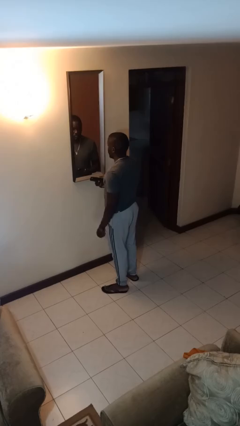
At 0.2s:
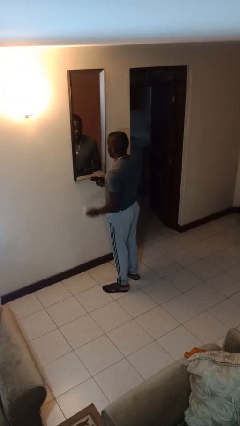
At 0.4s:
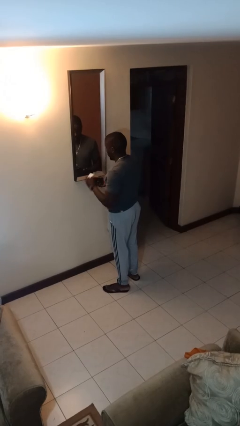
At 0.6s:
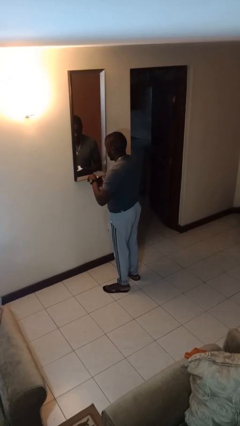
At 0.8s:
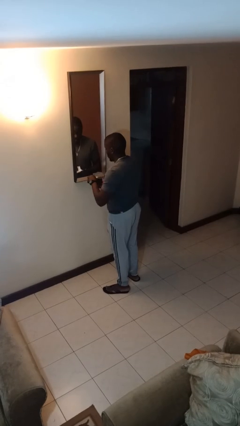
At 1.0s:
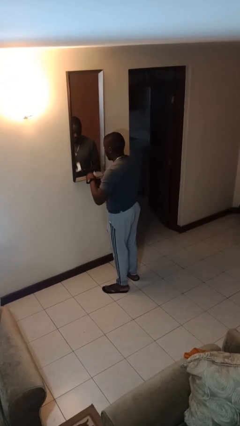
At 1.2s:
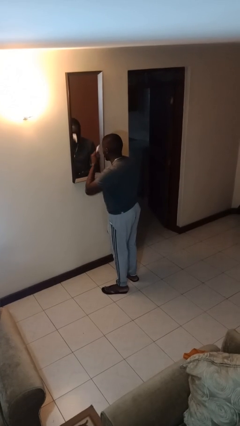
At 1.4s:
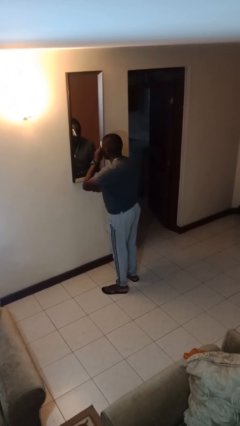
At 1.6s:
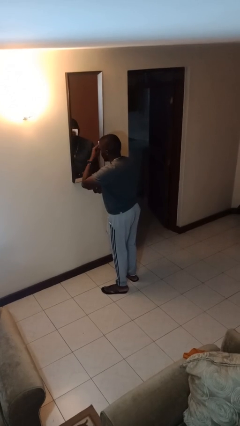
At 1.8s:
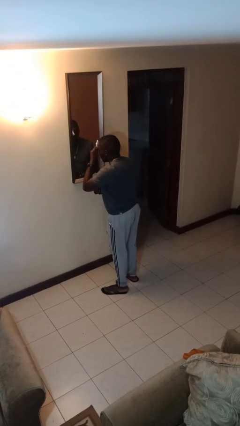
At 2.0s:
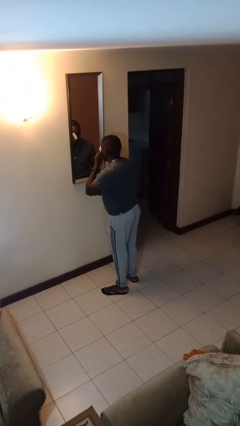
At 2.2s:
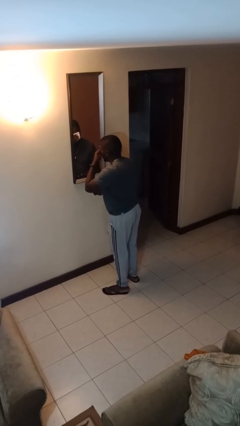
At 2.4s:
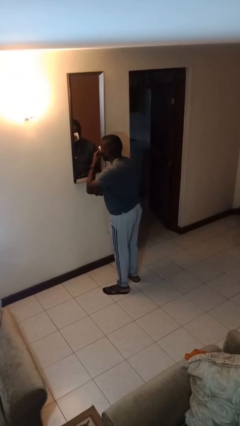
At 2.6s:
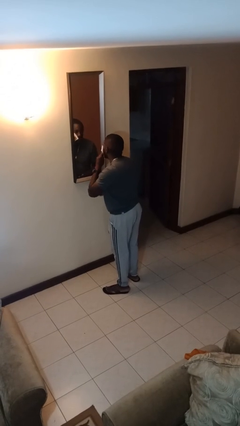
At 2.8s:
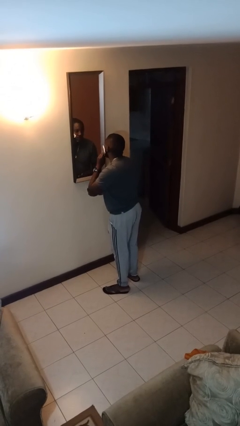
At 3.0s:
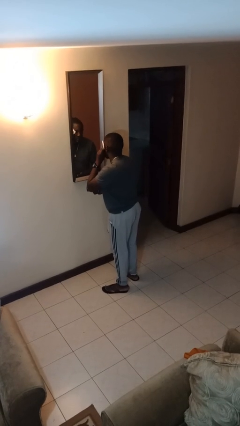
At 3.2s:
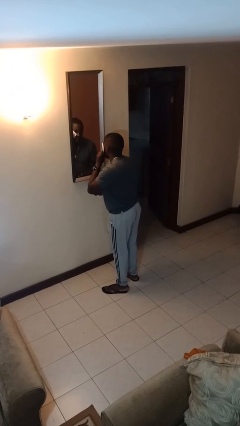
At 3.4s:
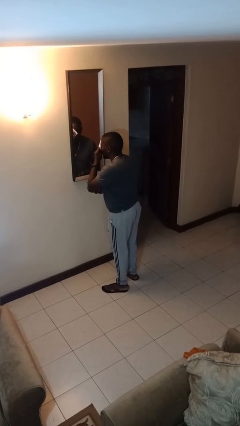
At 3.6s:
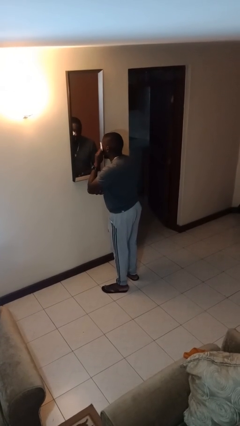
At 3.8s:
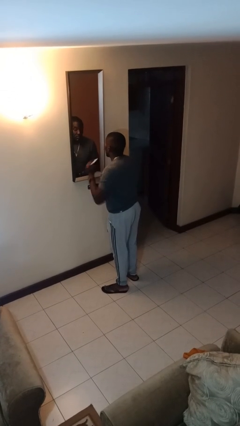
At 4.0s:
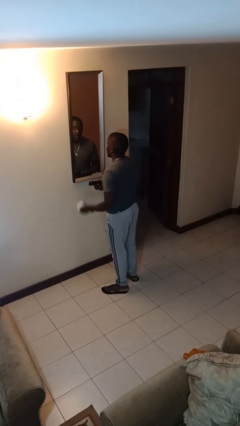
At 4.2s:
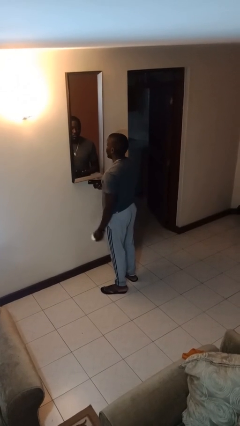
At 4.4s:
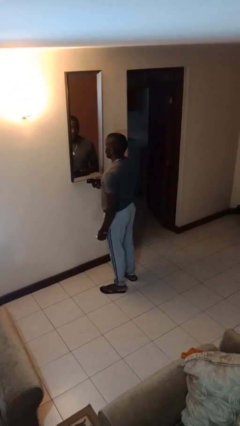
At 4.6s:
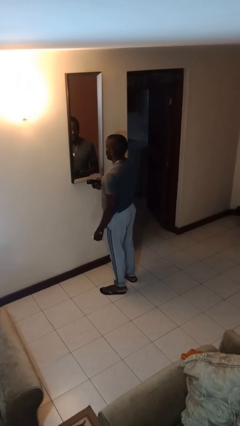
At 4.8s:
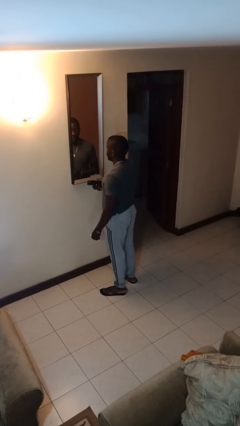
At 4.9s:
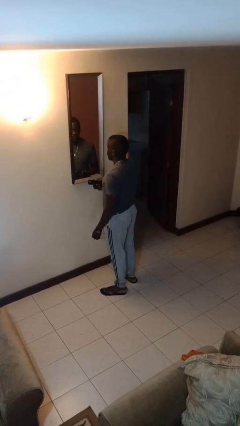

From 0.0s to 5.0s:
person applies foundation makeup

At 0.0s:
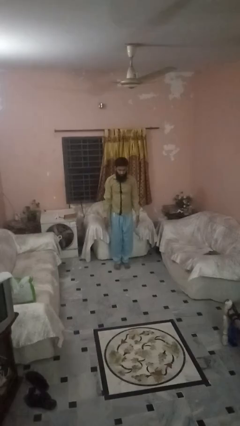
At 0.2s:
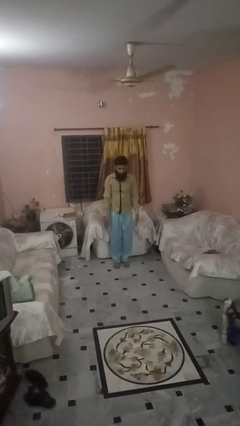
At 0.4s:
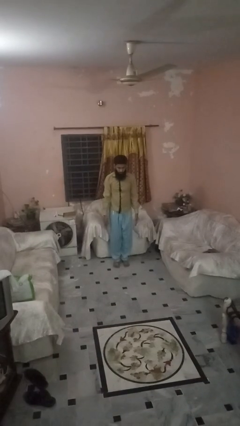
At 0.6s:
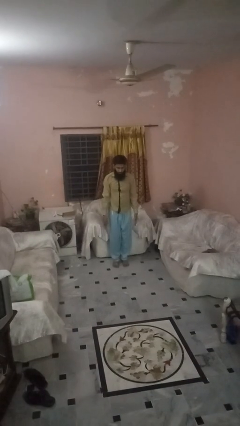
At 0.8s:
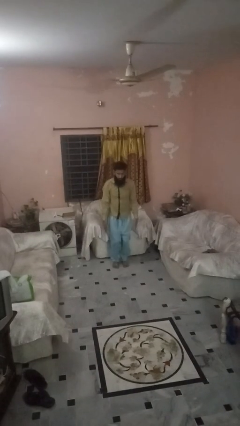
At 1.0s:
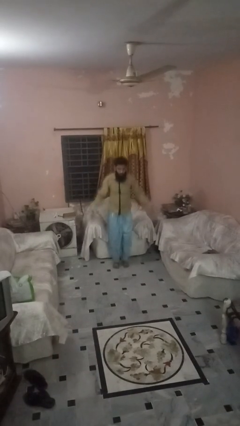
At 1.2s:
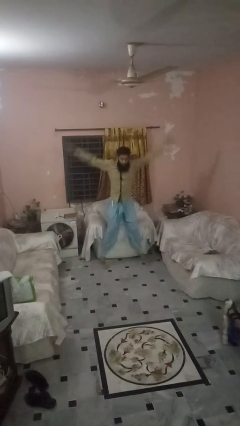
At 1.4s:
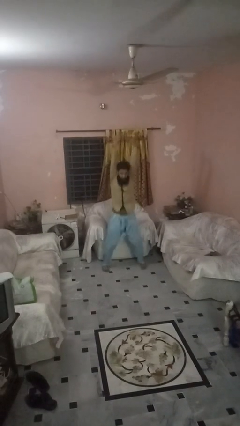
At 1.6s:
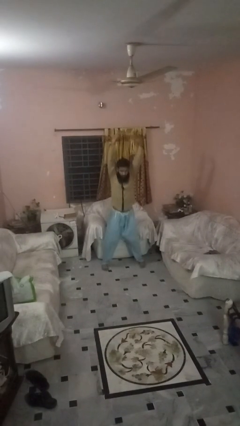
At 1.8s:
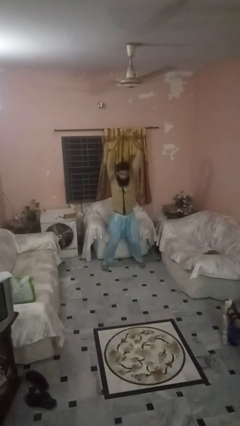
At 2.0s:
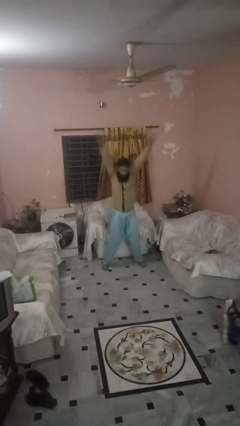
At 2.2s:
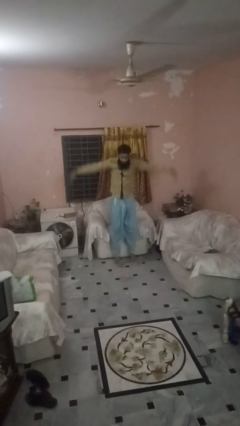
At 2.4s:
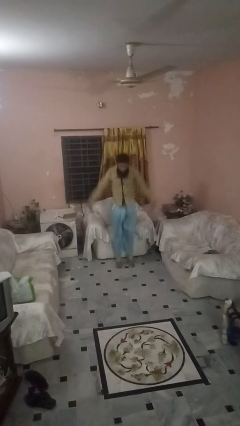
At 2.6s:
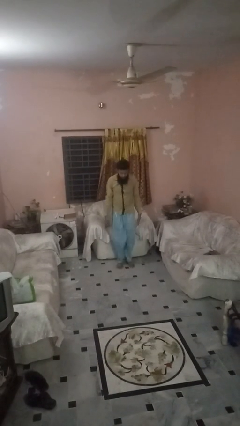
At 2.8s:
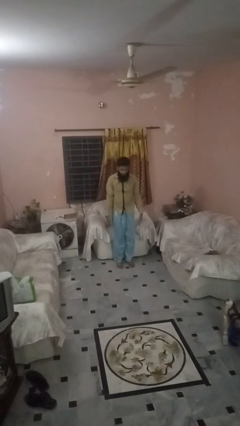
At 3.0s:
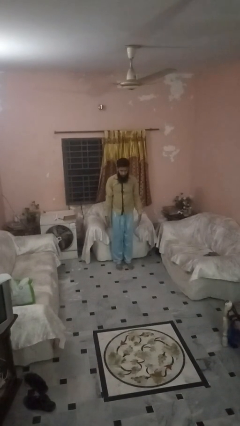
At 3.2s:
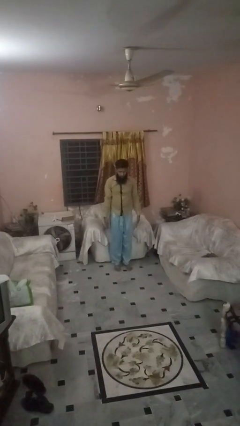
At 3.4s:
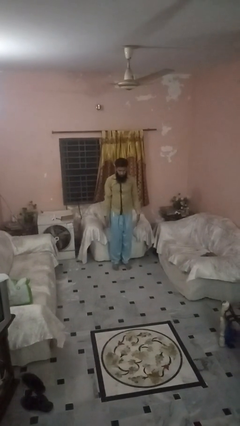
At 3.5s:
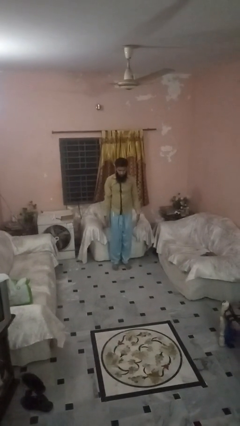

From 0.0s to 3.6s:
person exercises with jumping jacks

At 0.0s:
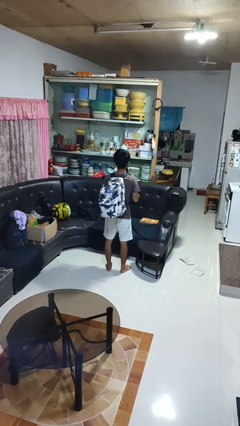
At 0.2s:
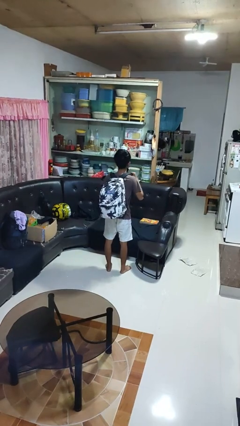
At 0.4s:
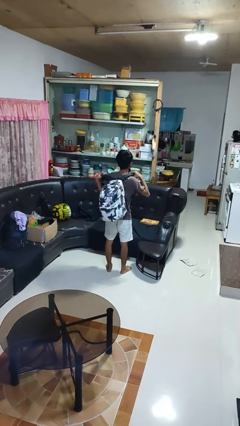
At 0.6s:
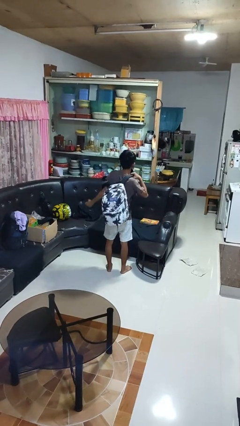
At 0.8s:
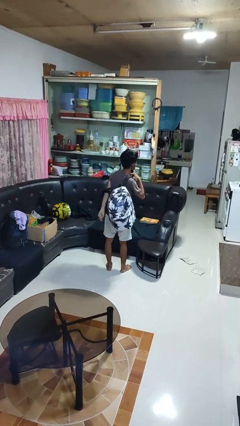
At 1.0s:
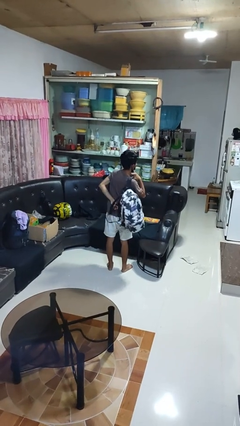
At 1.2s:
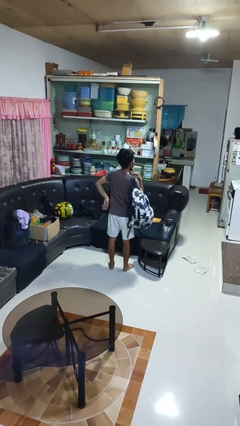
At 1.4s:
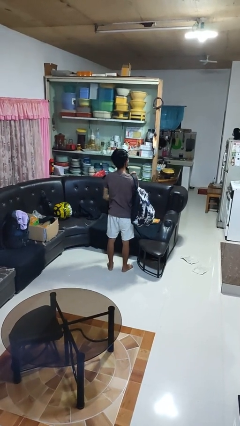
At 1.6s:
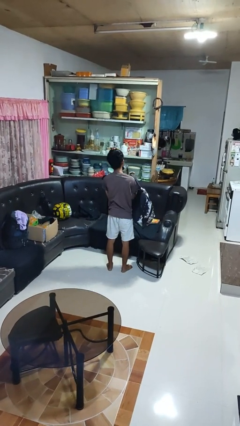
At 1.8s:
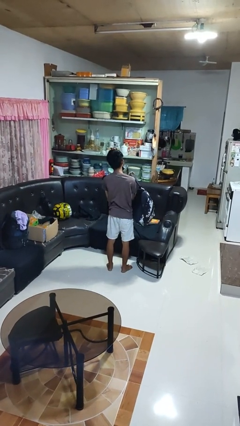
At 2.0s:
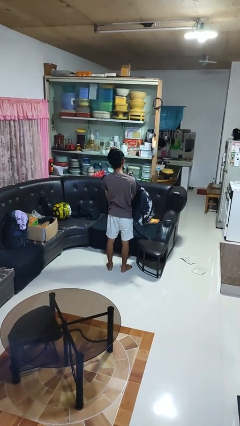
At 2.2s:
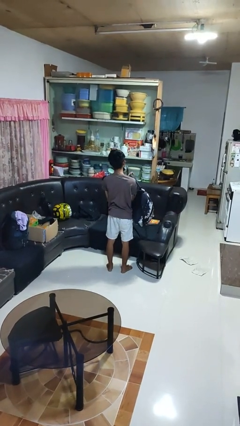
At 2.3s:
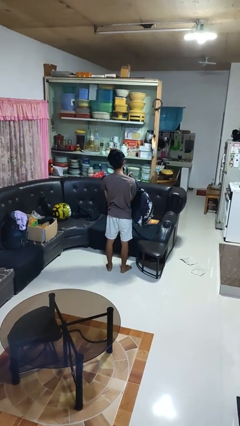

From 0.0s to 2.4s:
person takes off backpack

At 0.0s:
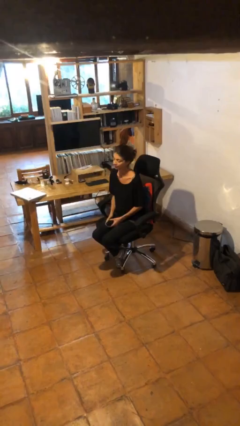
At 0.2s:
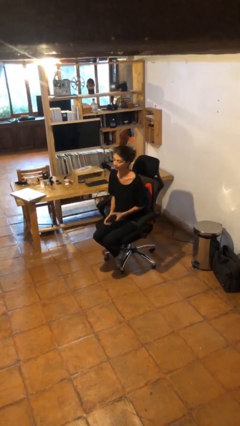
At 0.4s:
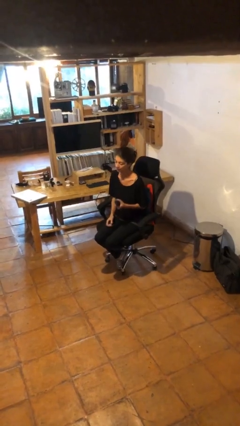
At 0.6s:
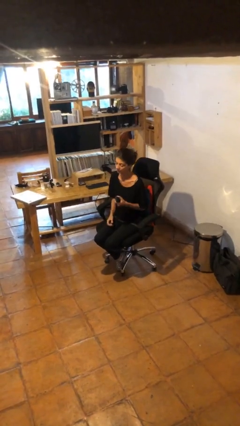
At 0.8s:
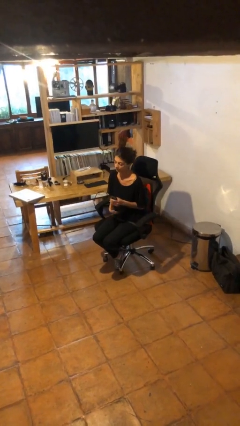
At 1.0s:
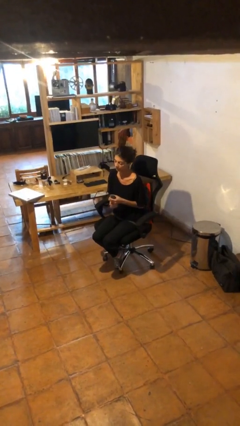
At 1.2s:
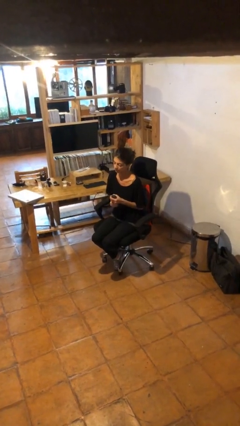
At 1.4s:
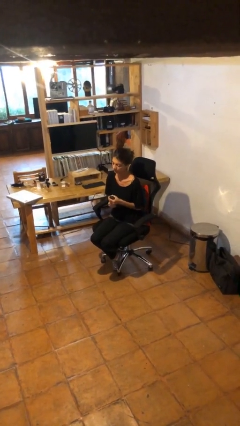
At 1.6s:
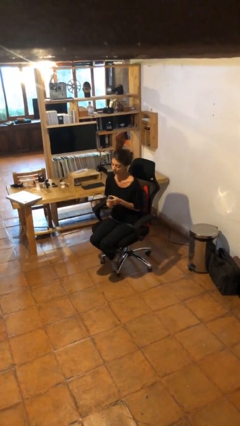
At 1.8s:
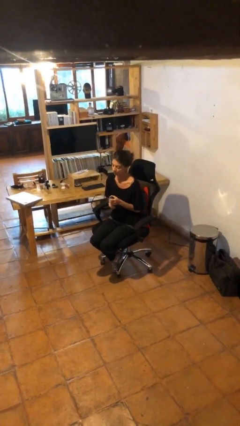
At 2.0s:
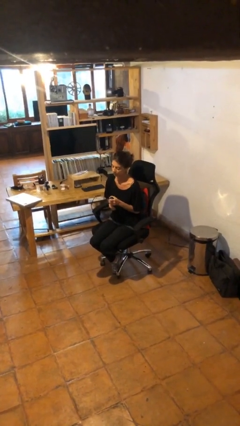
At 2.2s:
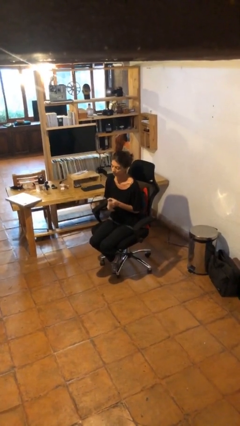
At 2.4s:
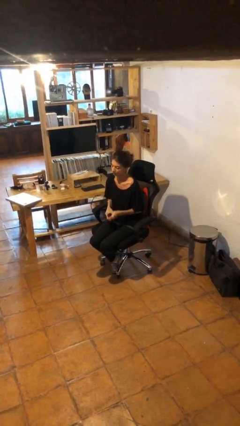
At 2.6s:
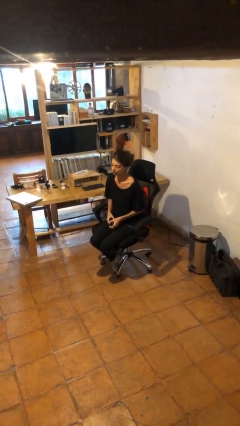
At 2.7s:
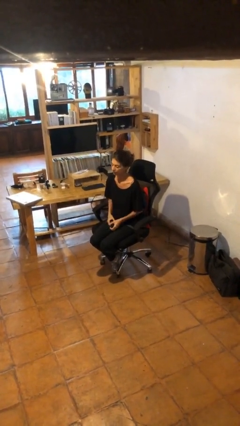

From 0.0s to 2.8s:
person squeezes object

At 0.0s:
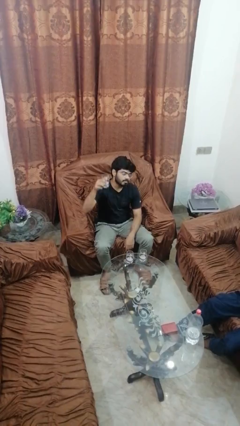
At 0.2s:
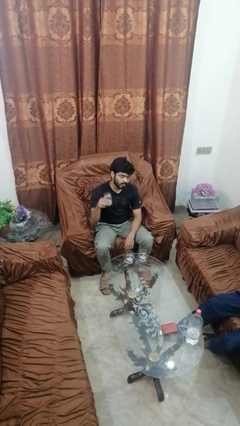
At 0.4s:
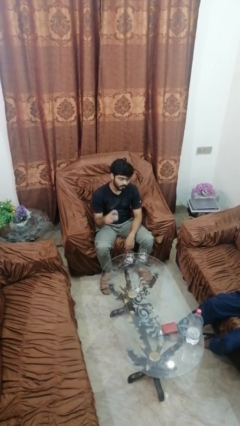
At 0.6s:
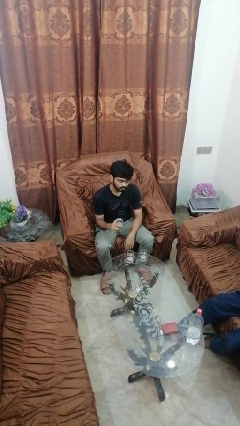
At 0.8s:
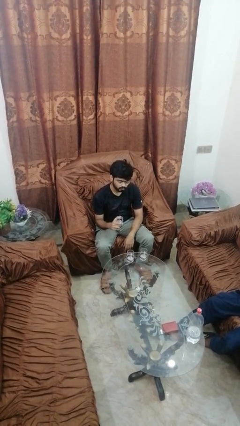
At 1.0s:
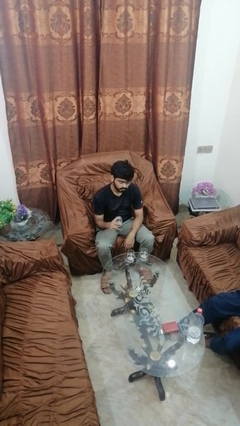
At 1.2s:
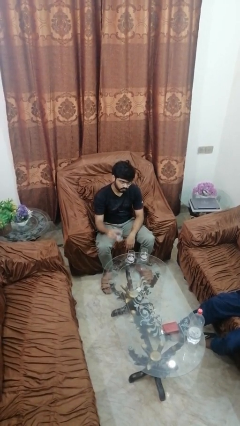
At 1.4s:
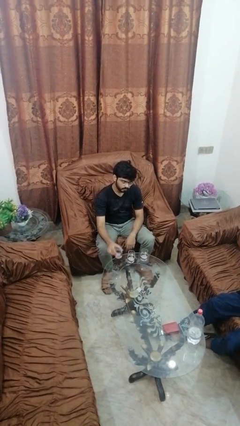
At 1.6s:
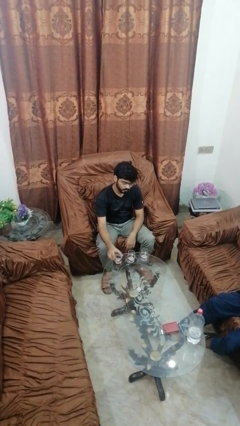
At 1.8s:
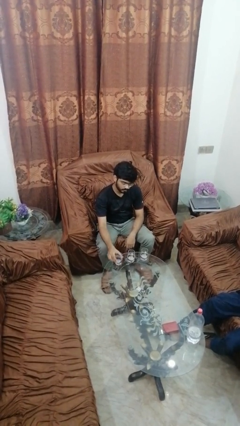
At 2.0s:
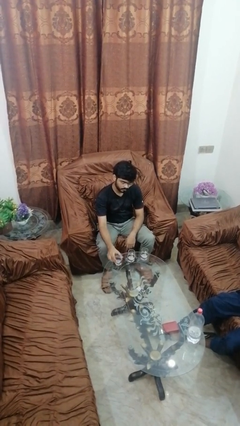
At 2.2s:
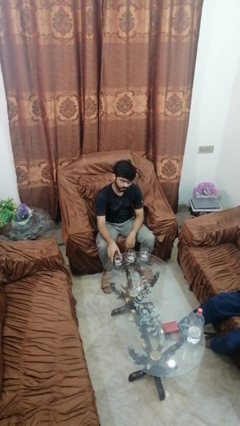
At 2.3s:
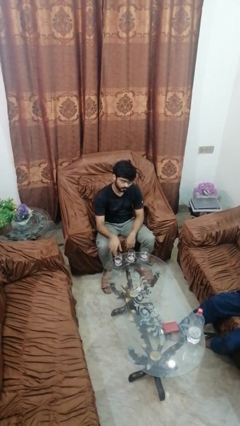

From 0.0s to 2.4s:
person puts down object on table

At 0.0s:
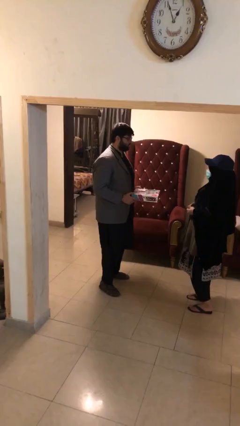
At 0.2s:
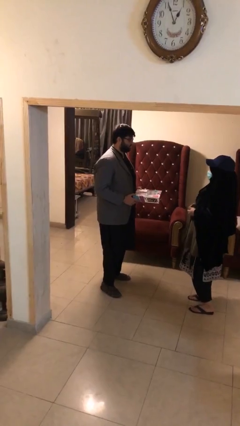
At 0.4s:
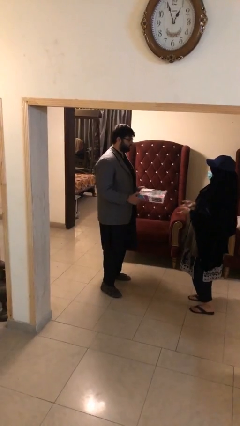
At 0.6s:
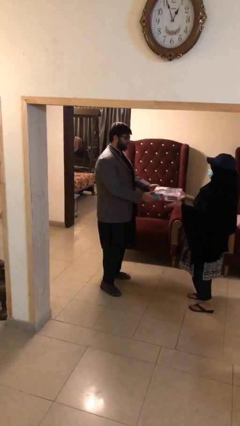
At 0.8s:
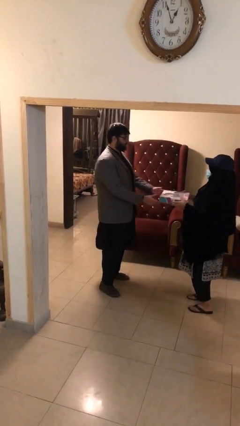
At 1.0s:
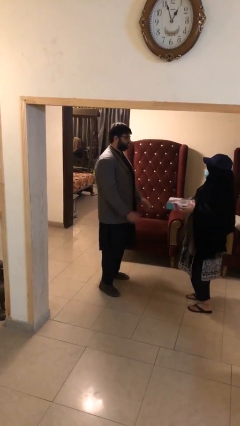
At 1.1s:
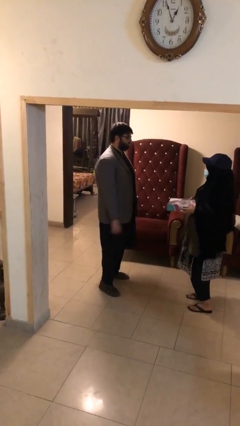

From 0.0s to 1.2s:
person transfers object to person
